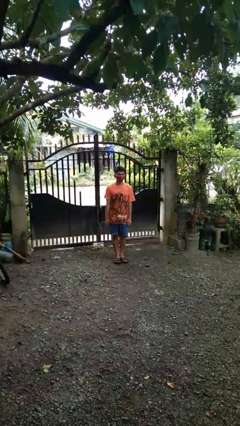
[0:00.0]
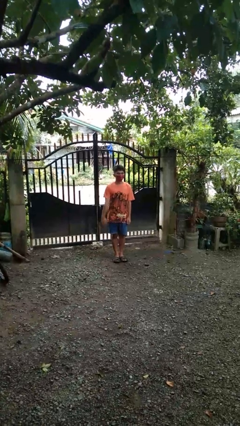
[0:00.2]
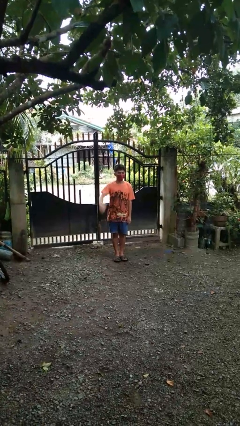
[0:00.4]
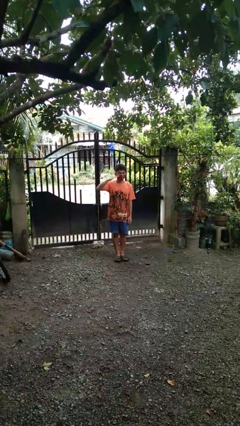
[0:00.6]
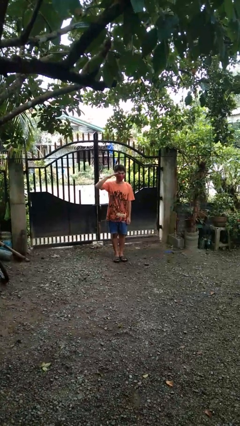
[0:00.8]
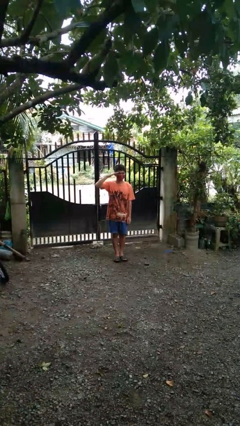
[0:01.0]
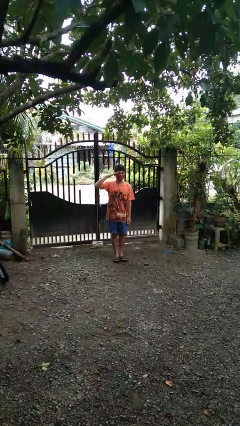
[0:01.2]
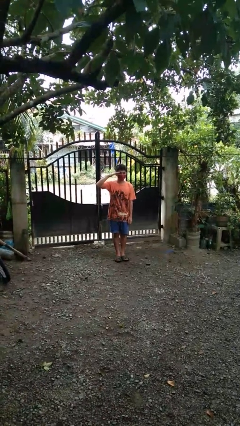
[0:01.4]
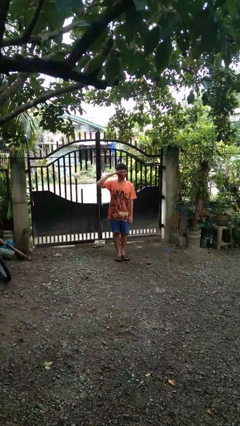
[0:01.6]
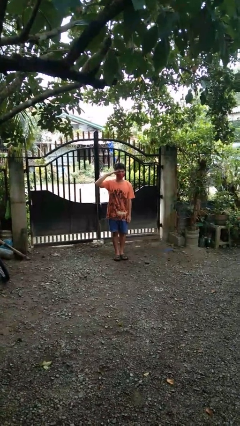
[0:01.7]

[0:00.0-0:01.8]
person salutes

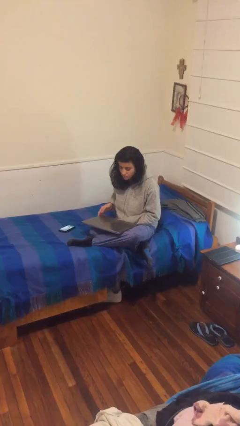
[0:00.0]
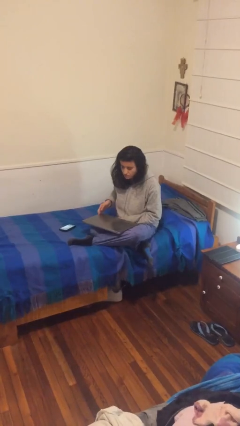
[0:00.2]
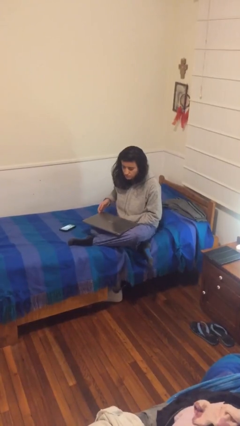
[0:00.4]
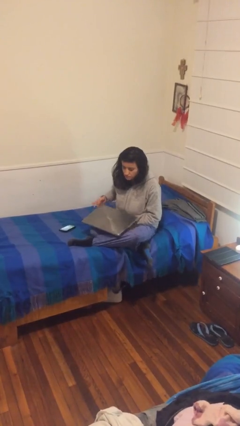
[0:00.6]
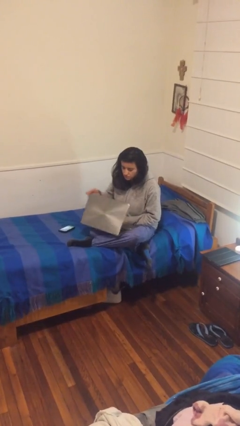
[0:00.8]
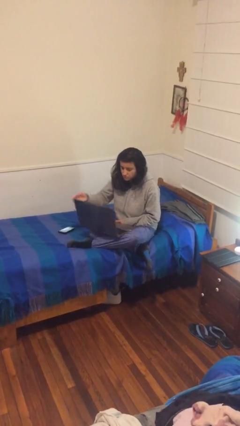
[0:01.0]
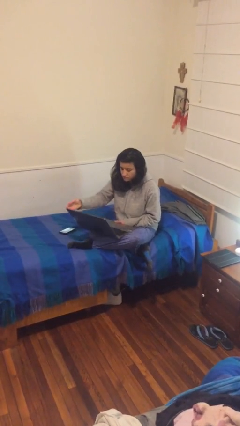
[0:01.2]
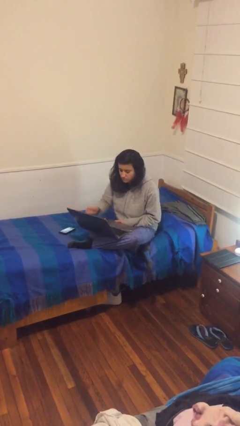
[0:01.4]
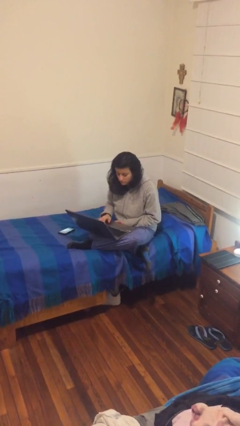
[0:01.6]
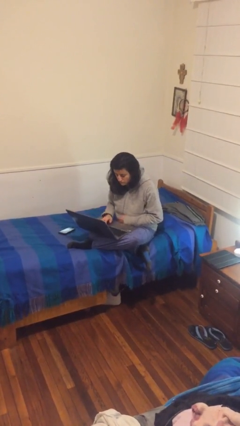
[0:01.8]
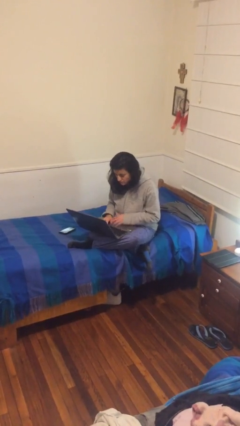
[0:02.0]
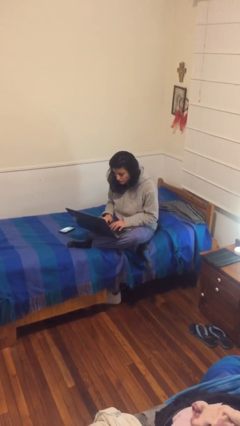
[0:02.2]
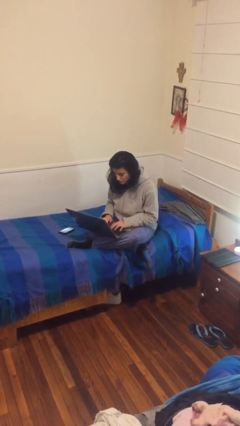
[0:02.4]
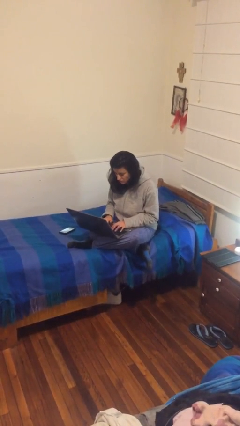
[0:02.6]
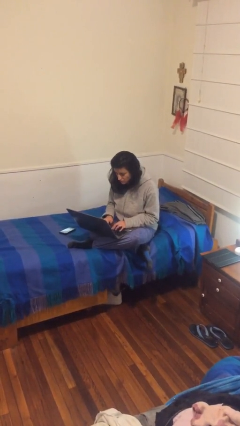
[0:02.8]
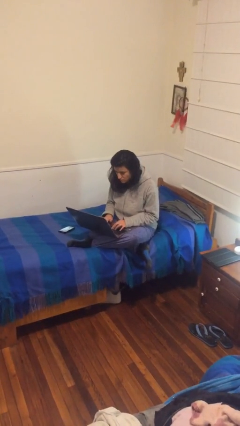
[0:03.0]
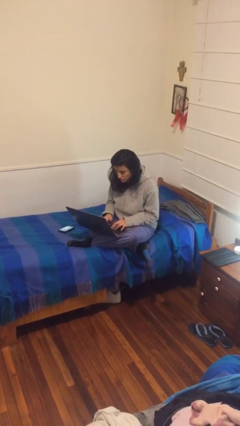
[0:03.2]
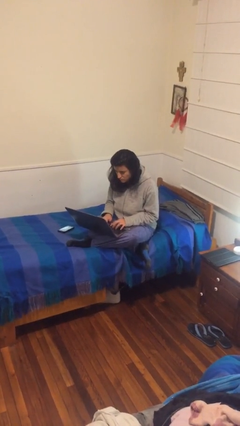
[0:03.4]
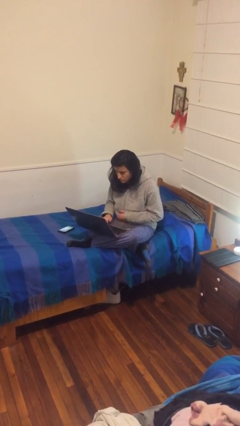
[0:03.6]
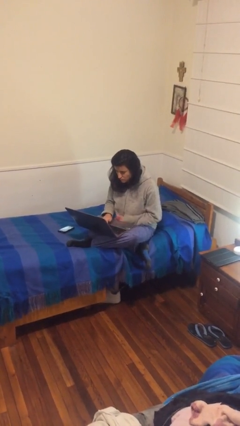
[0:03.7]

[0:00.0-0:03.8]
person interacts with laptop

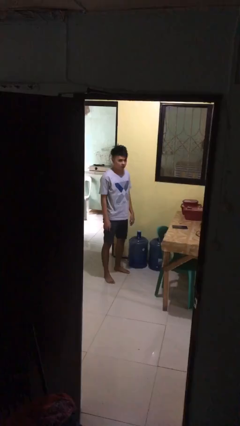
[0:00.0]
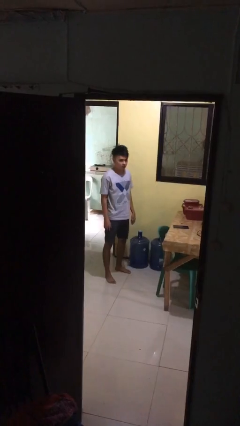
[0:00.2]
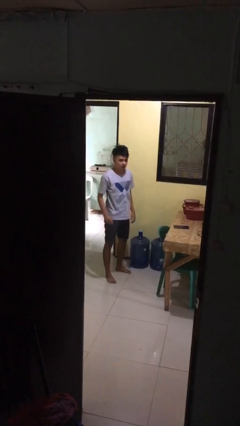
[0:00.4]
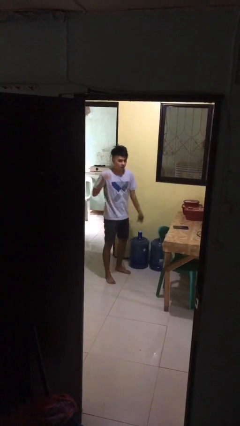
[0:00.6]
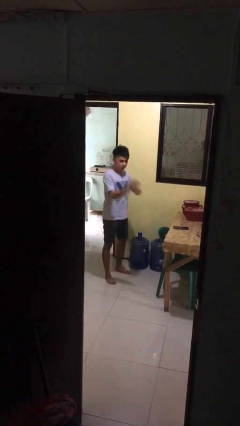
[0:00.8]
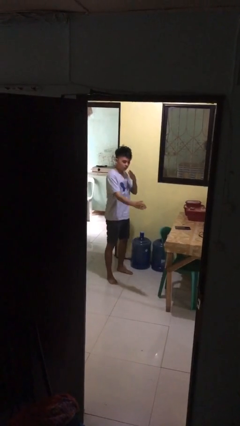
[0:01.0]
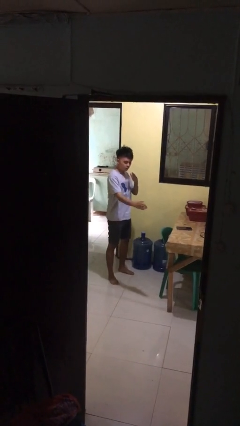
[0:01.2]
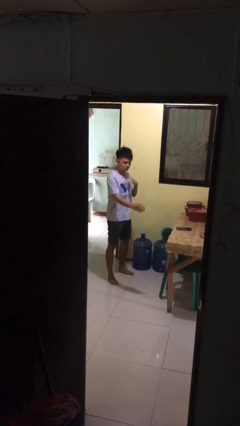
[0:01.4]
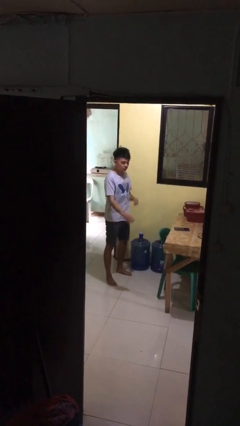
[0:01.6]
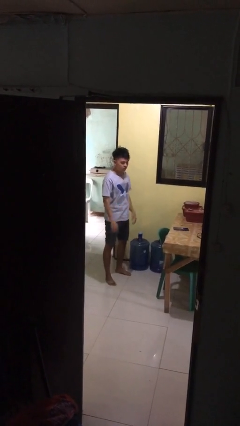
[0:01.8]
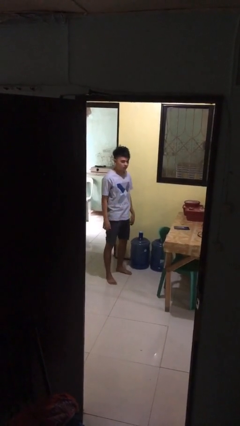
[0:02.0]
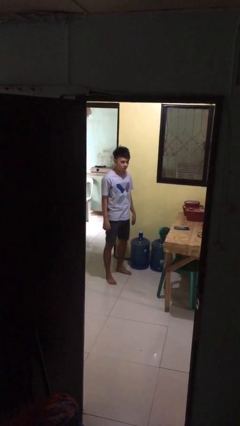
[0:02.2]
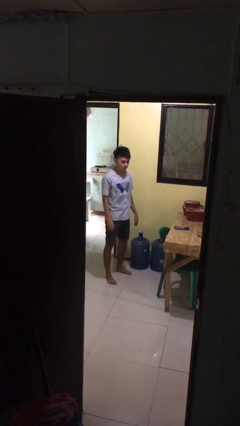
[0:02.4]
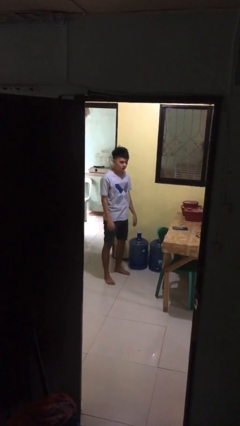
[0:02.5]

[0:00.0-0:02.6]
person karate chop

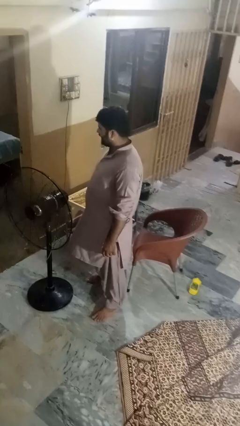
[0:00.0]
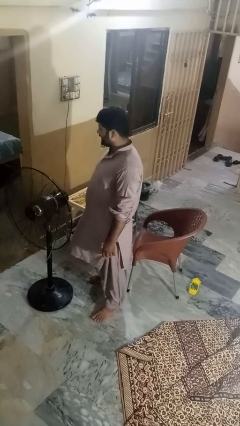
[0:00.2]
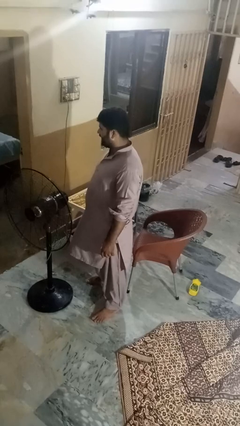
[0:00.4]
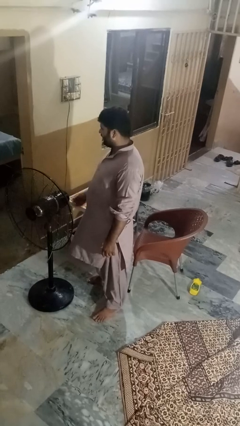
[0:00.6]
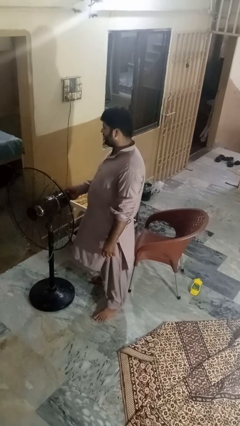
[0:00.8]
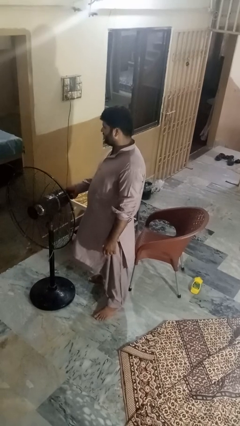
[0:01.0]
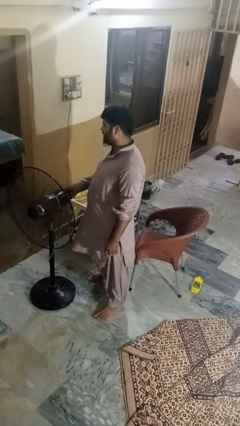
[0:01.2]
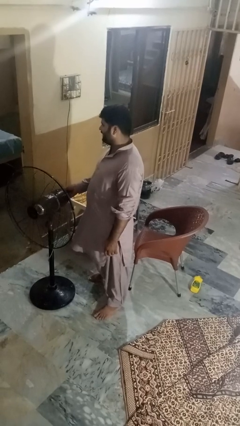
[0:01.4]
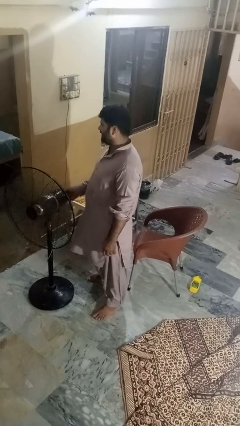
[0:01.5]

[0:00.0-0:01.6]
person turns off fan

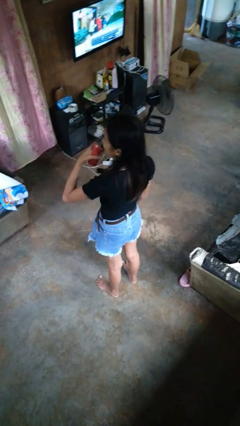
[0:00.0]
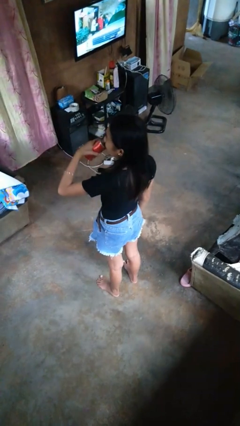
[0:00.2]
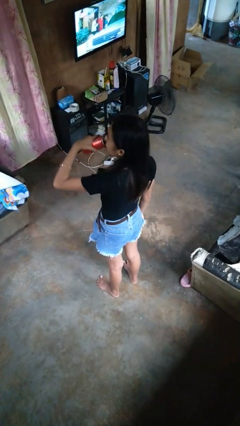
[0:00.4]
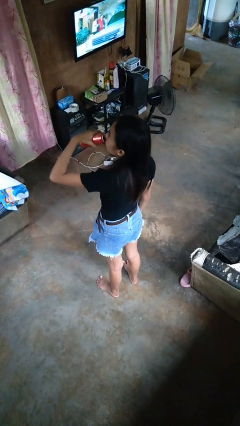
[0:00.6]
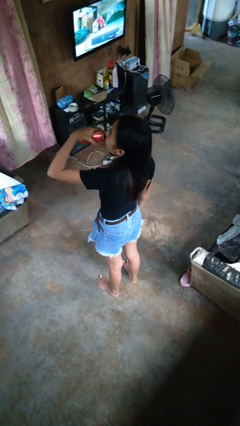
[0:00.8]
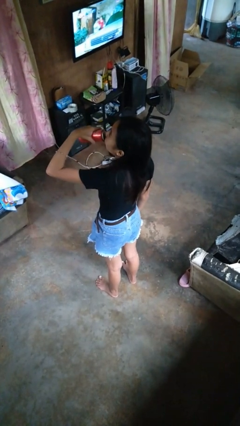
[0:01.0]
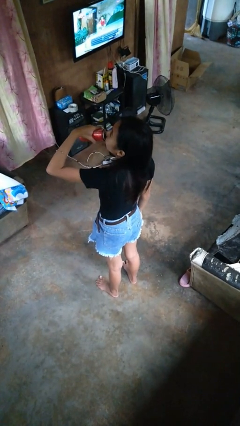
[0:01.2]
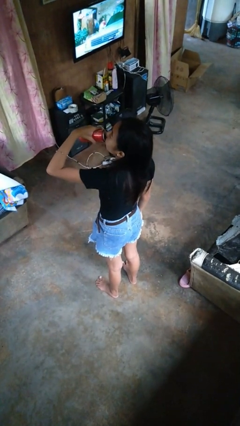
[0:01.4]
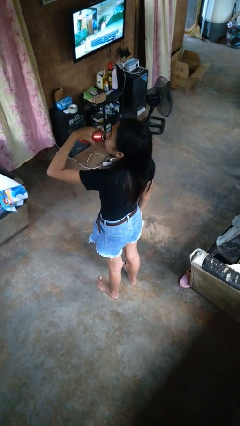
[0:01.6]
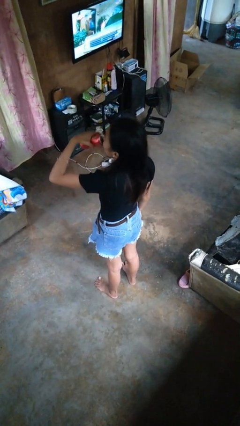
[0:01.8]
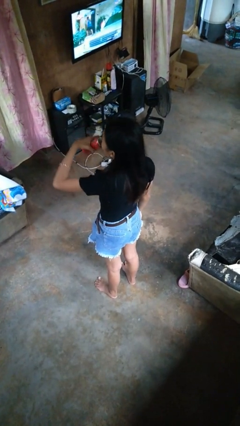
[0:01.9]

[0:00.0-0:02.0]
person drinks from beverage can

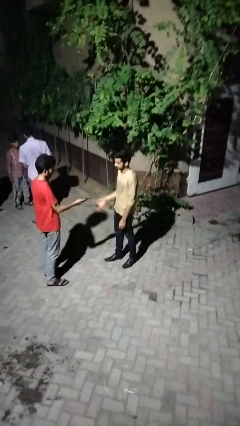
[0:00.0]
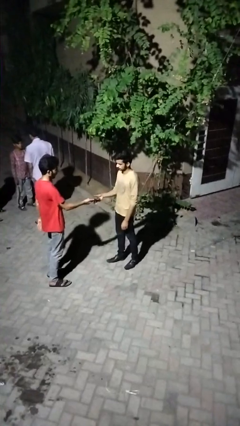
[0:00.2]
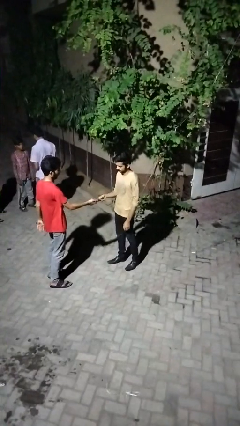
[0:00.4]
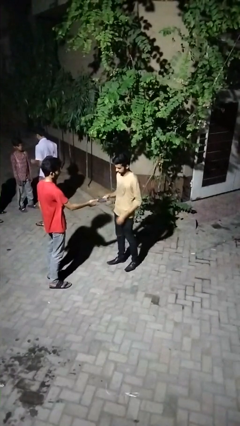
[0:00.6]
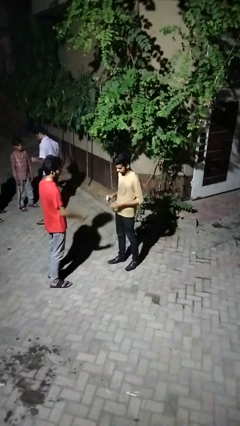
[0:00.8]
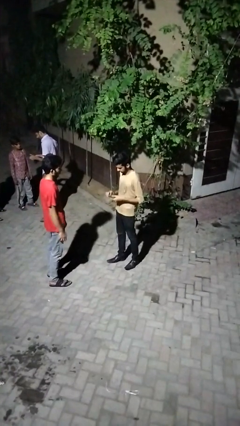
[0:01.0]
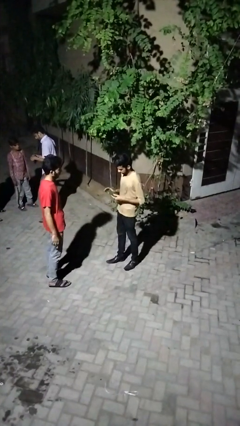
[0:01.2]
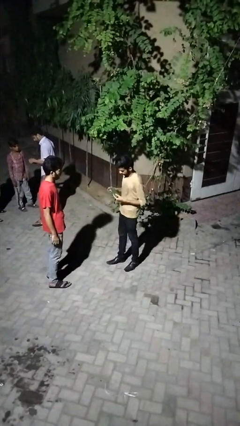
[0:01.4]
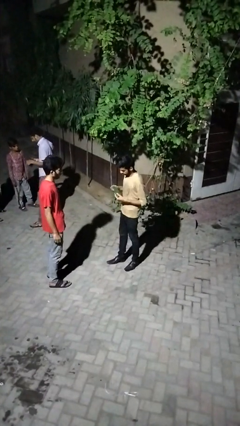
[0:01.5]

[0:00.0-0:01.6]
person transfers object to person

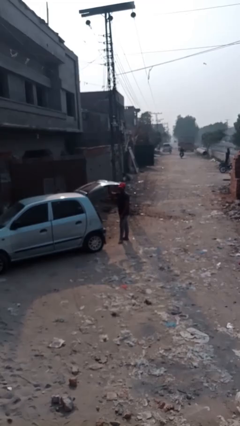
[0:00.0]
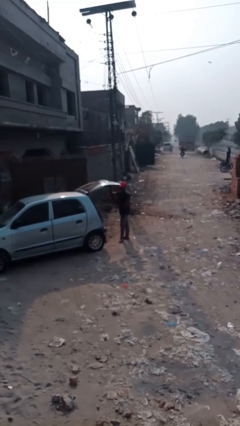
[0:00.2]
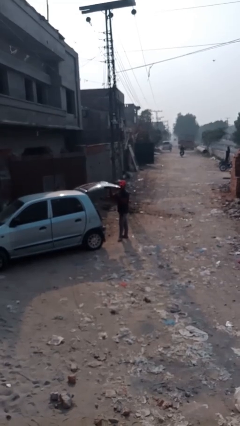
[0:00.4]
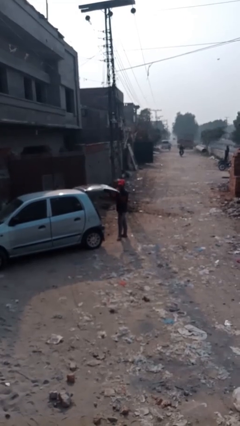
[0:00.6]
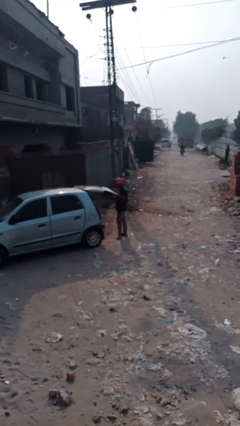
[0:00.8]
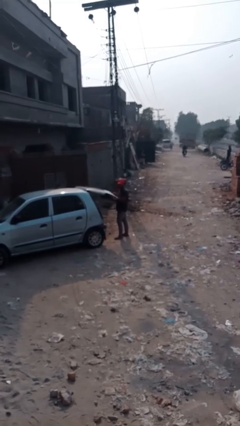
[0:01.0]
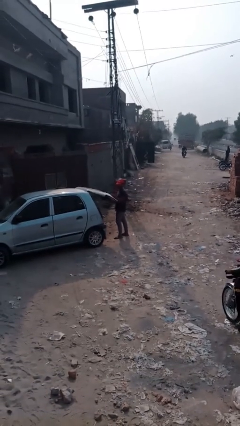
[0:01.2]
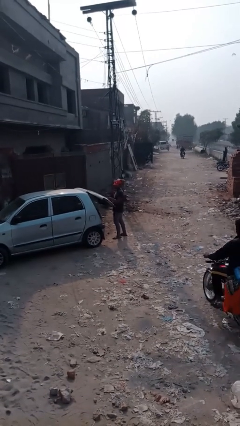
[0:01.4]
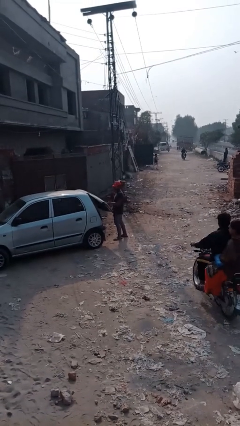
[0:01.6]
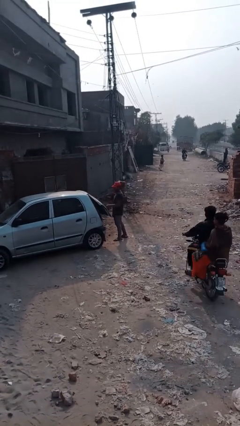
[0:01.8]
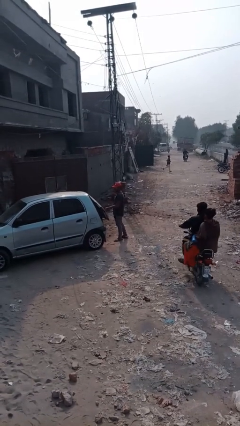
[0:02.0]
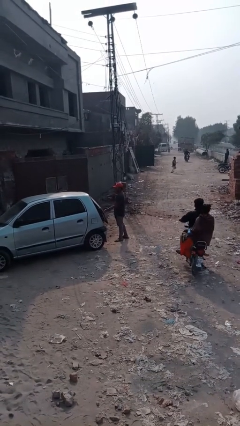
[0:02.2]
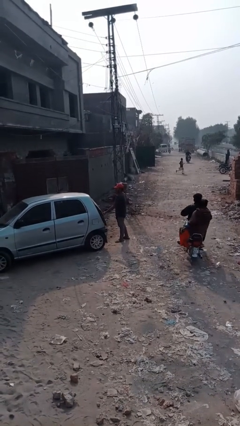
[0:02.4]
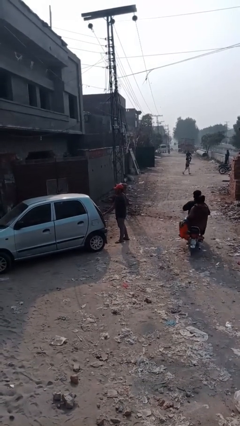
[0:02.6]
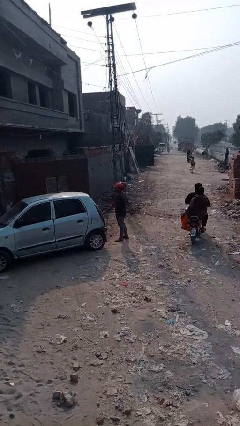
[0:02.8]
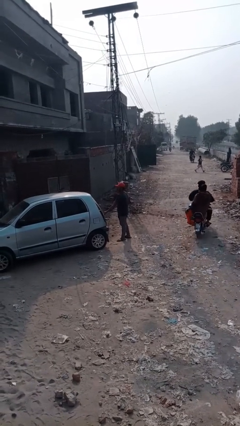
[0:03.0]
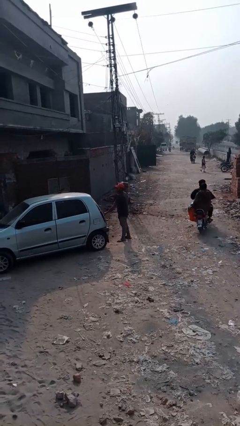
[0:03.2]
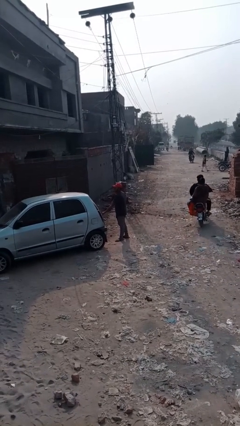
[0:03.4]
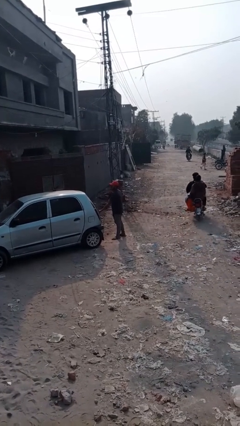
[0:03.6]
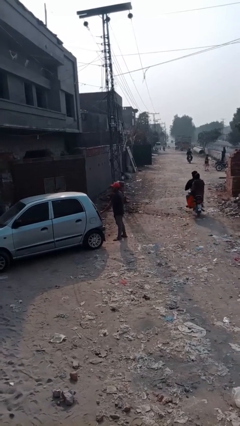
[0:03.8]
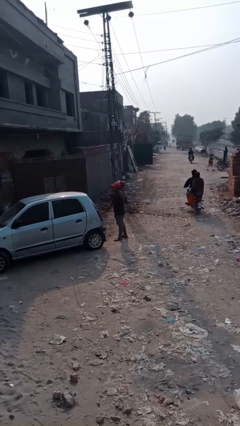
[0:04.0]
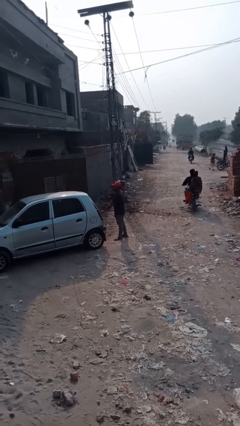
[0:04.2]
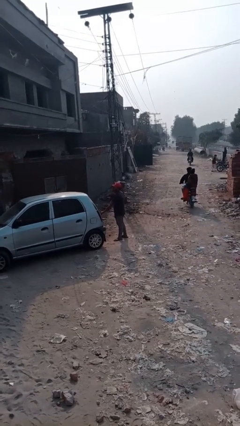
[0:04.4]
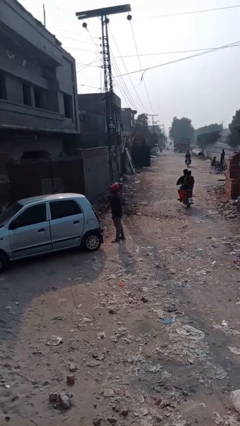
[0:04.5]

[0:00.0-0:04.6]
person closes car trunk
